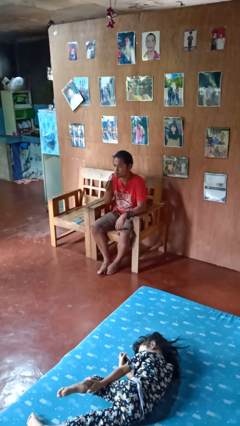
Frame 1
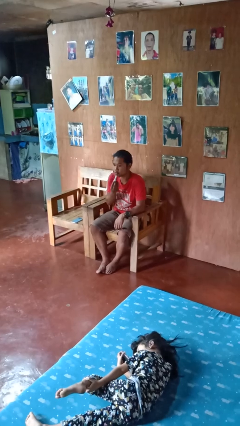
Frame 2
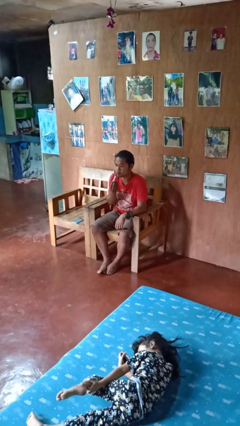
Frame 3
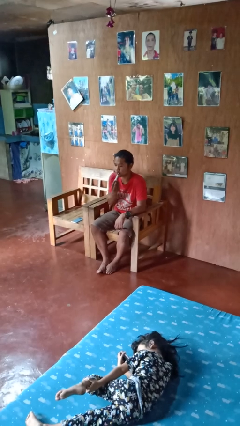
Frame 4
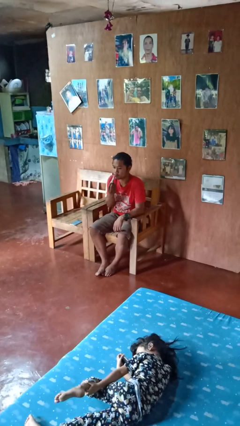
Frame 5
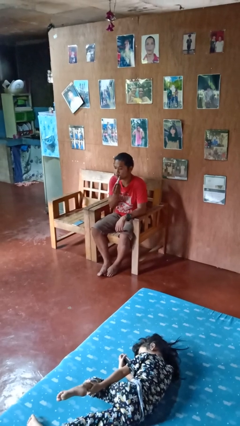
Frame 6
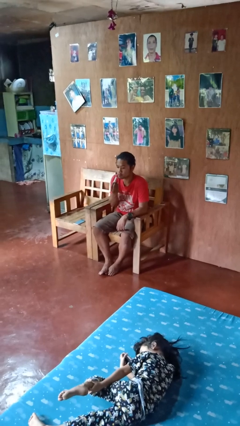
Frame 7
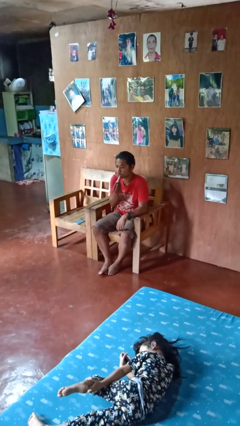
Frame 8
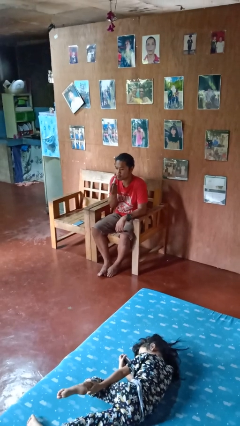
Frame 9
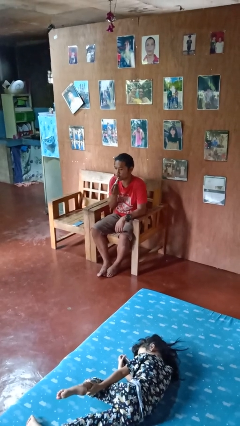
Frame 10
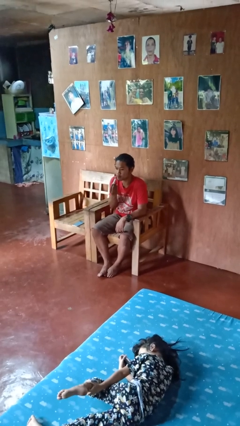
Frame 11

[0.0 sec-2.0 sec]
person applies lip makeup

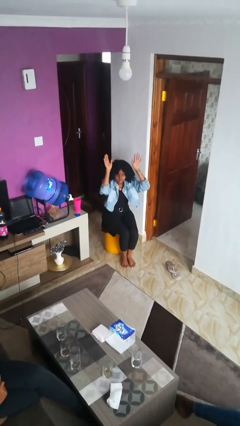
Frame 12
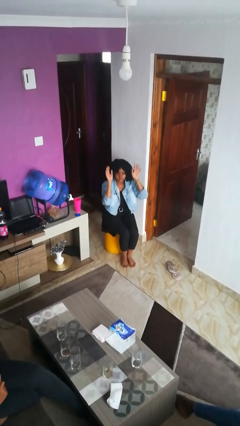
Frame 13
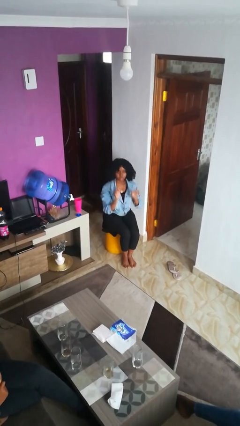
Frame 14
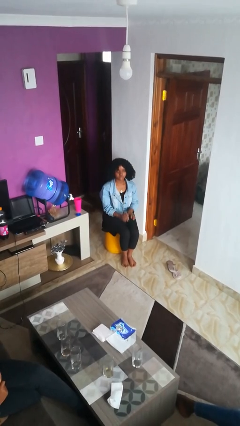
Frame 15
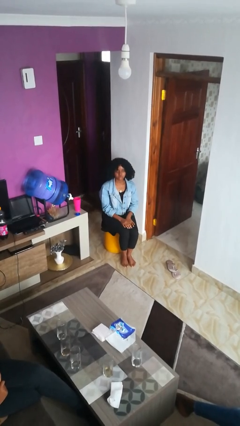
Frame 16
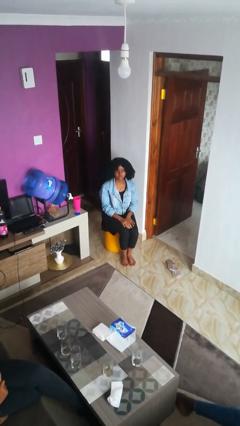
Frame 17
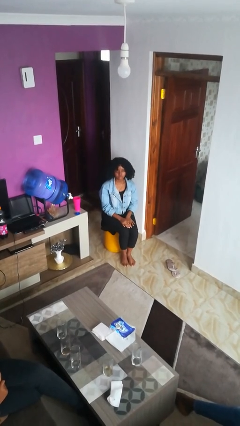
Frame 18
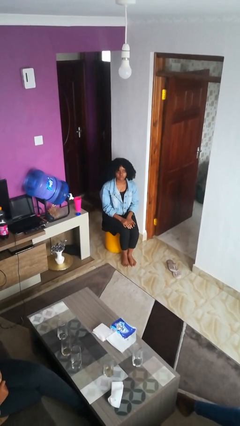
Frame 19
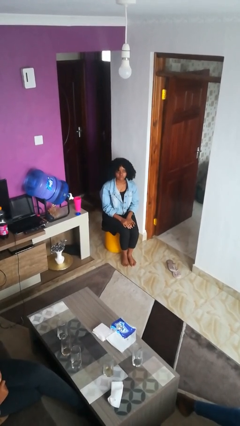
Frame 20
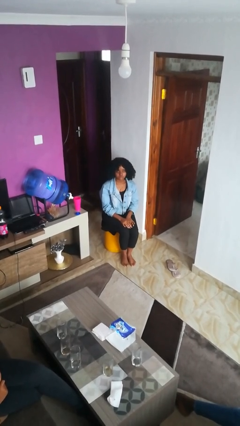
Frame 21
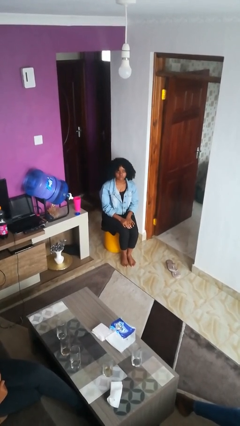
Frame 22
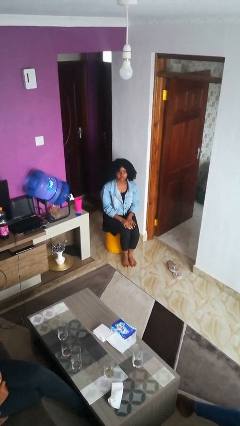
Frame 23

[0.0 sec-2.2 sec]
person gestures lower hand

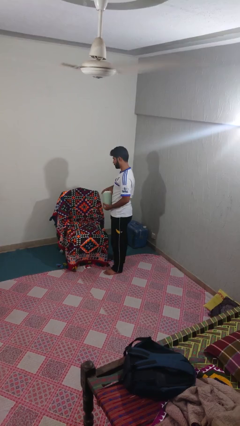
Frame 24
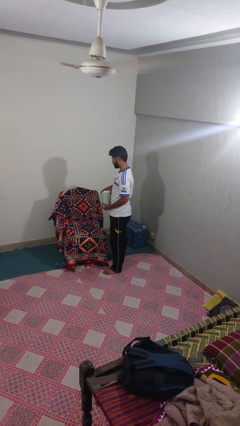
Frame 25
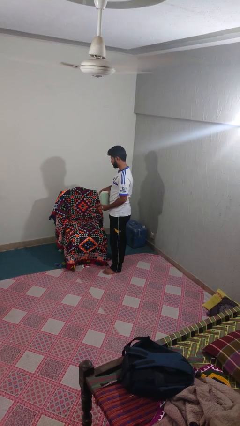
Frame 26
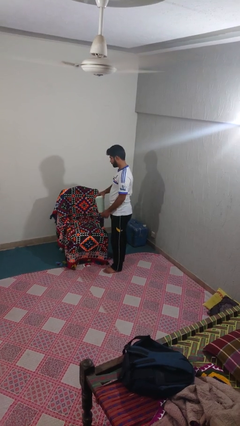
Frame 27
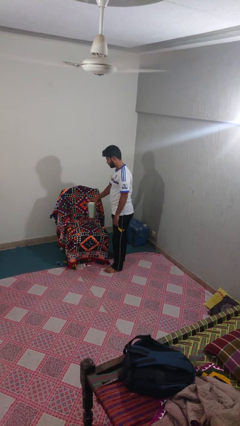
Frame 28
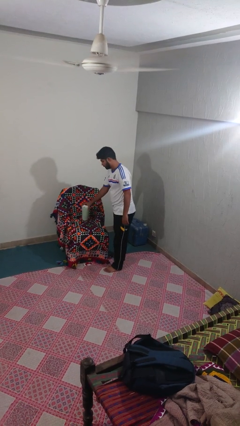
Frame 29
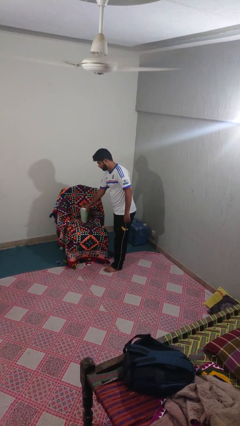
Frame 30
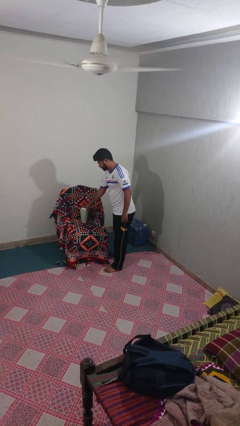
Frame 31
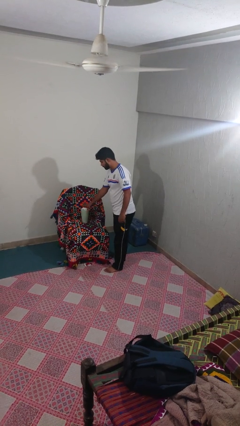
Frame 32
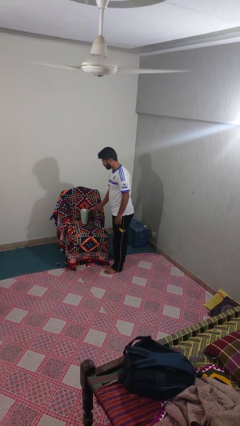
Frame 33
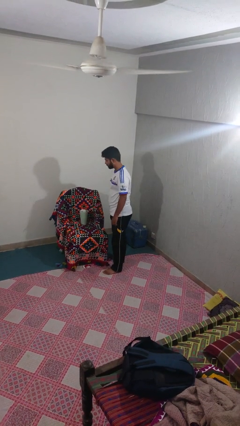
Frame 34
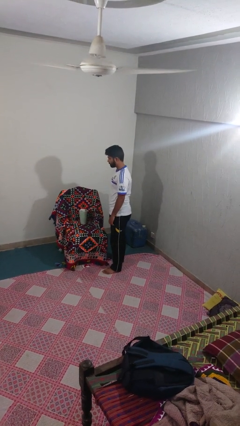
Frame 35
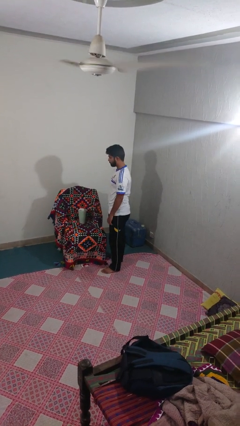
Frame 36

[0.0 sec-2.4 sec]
person puts down object on couch

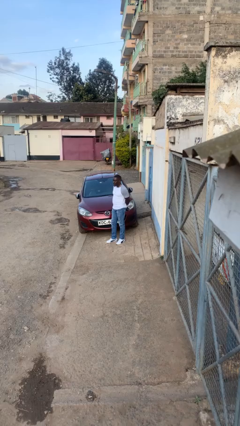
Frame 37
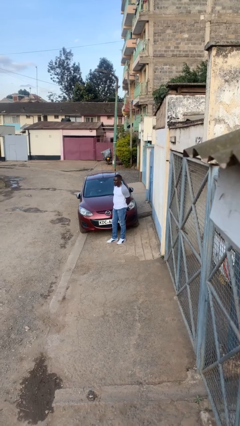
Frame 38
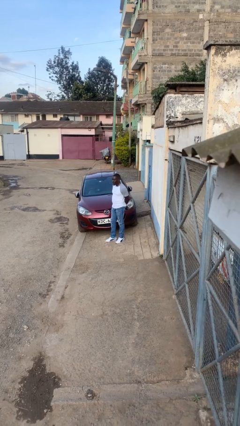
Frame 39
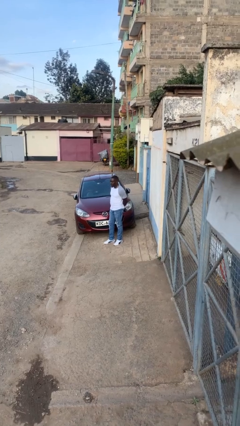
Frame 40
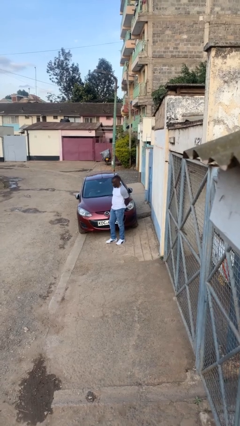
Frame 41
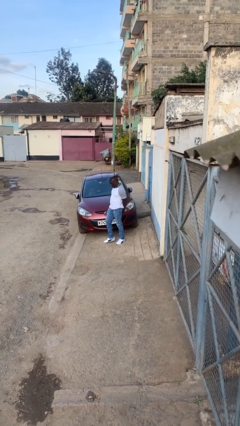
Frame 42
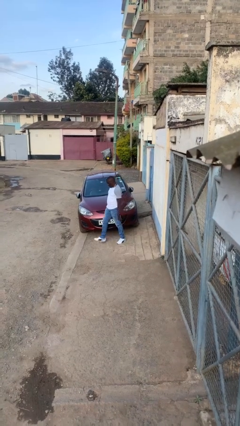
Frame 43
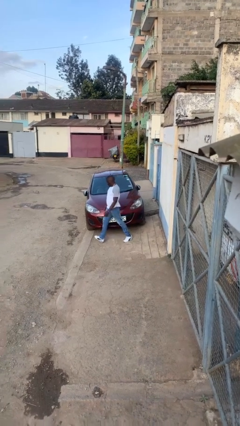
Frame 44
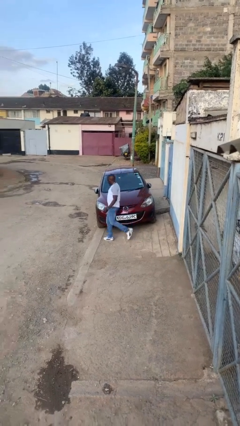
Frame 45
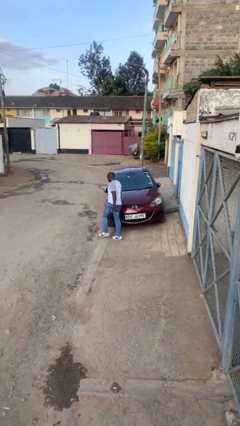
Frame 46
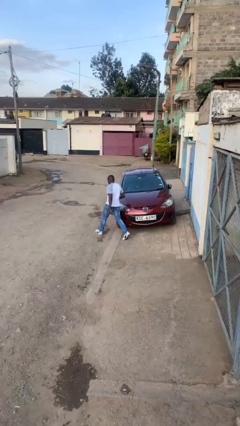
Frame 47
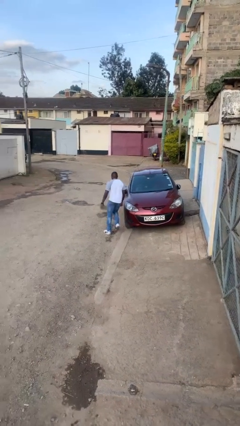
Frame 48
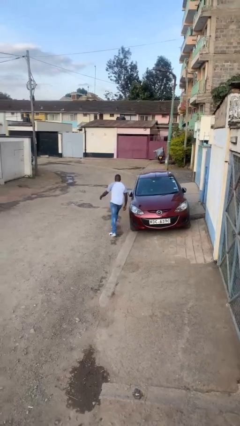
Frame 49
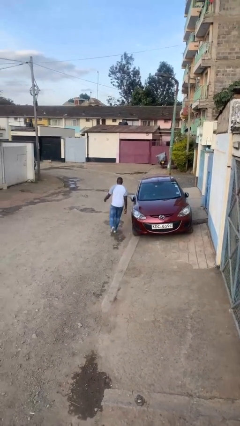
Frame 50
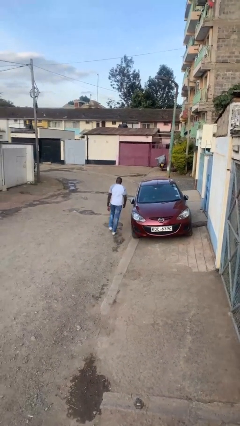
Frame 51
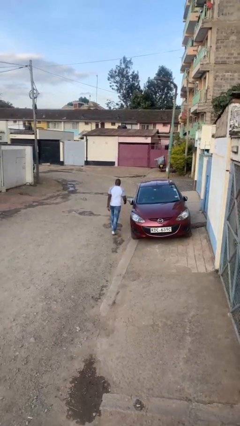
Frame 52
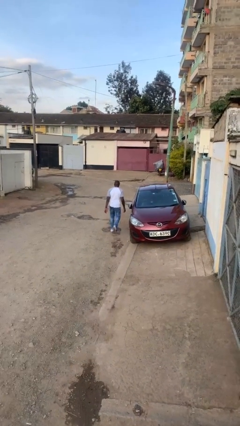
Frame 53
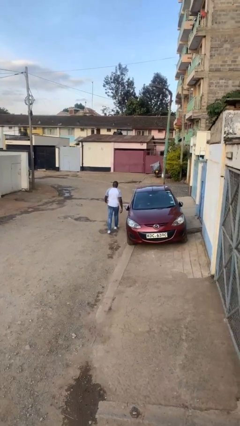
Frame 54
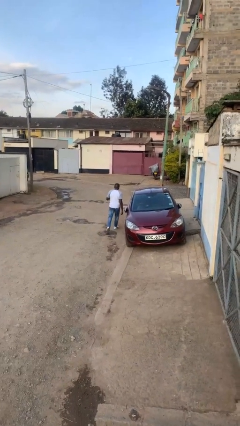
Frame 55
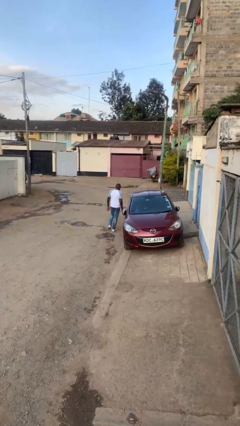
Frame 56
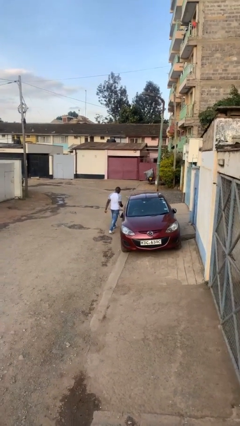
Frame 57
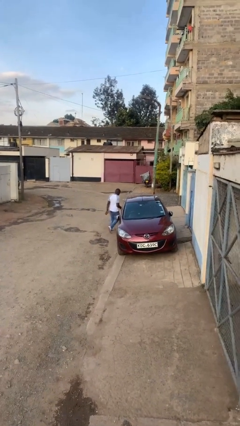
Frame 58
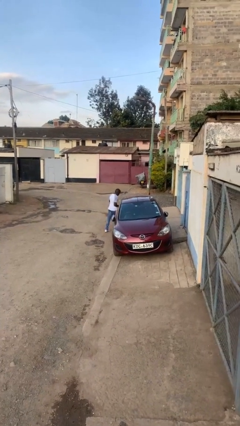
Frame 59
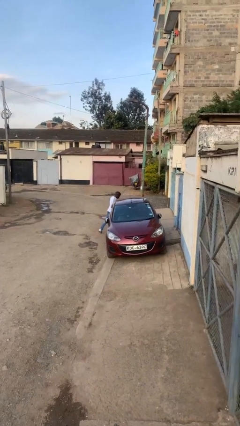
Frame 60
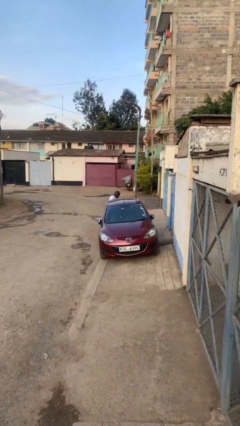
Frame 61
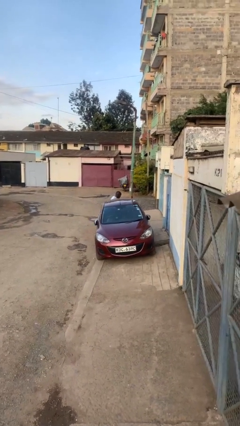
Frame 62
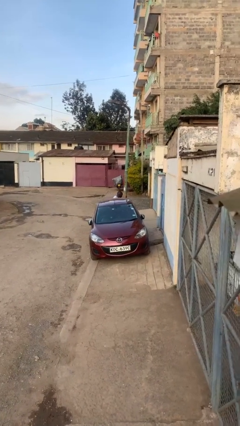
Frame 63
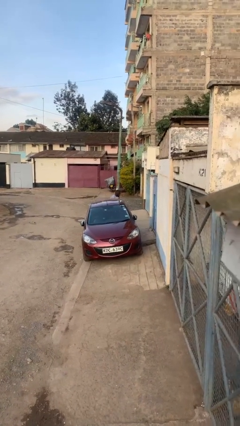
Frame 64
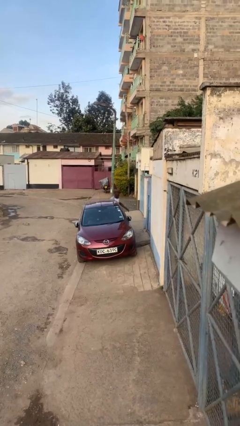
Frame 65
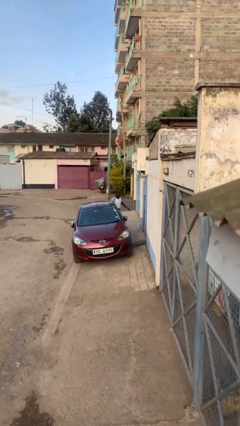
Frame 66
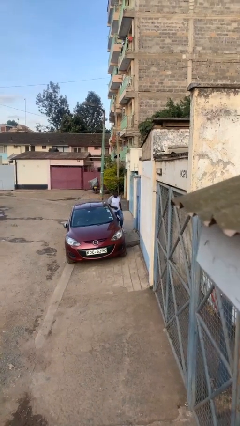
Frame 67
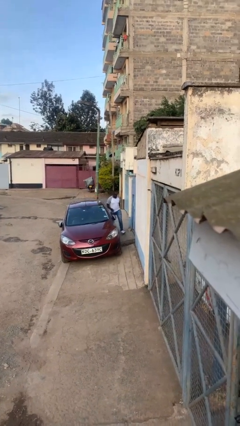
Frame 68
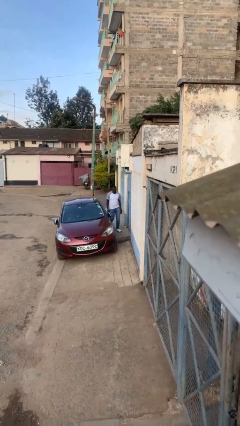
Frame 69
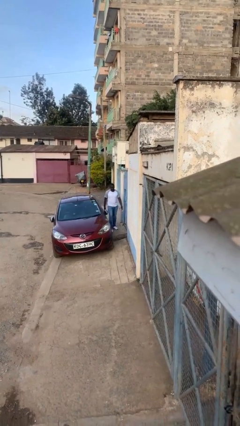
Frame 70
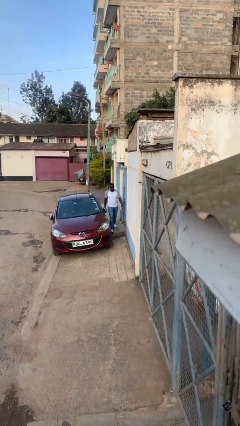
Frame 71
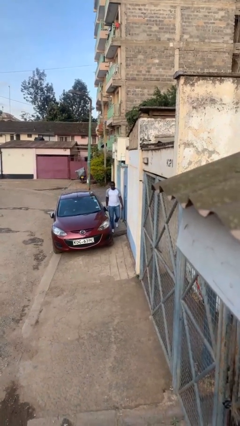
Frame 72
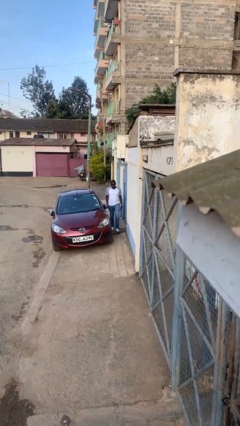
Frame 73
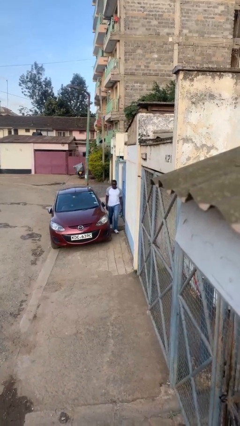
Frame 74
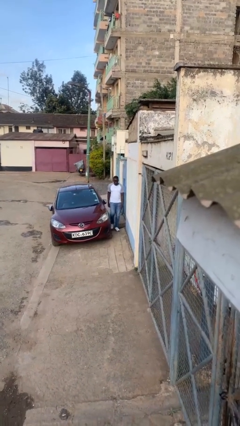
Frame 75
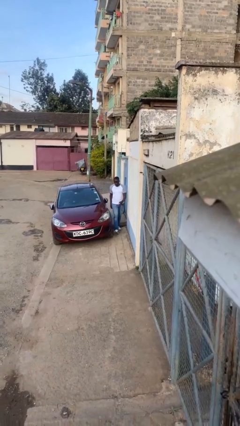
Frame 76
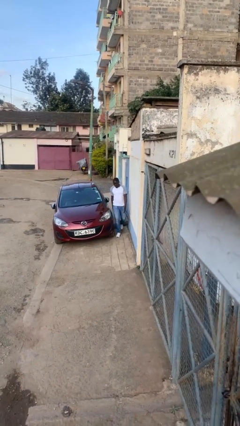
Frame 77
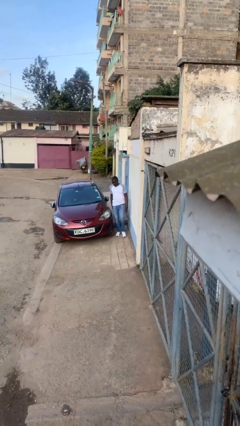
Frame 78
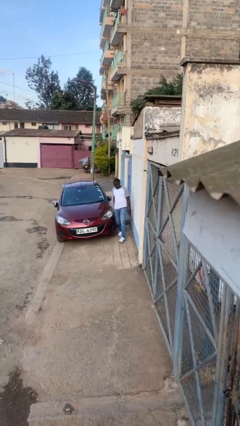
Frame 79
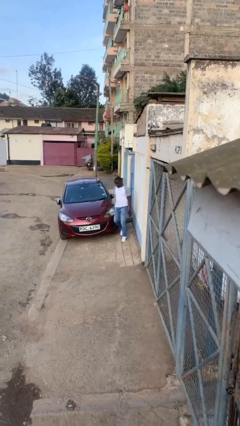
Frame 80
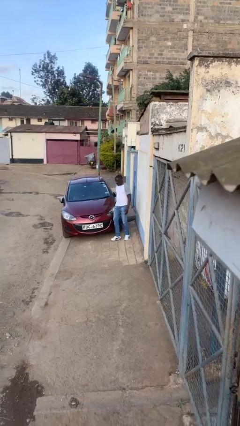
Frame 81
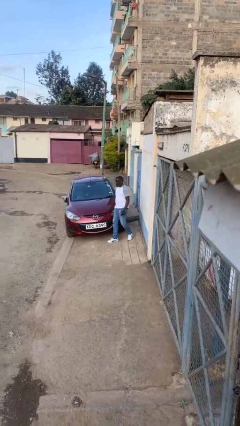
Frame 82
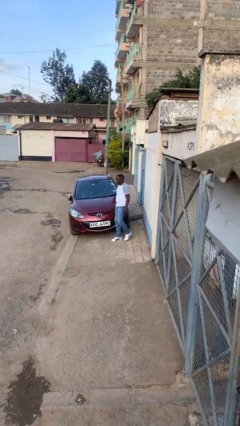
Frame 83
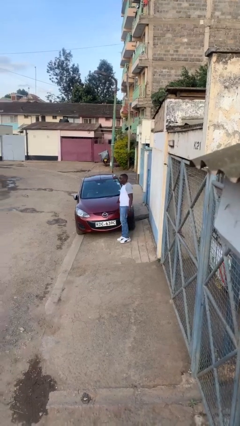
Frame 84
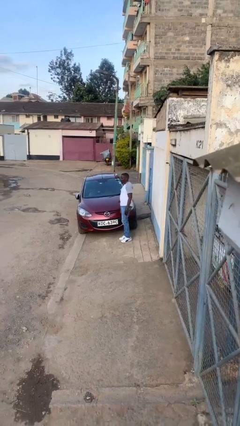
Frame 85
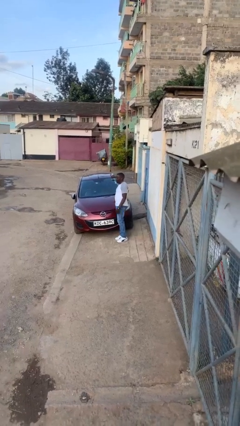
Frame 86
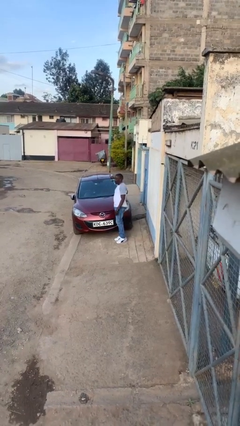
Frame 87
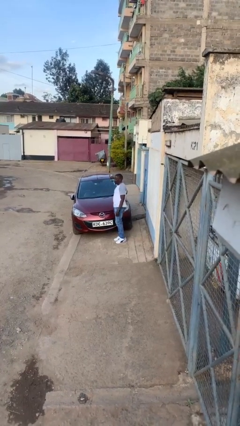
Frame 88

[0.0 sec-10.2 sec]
person walks around car

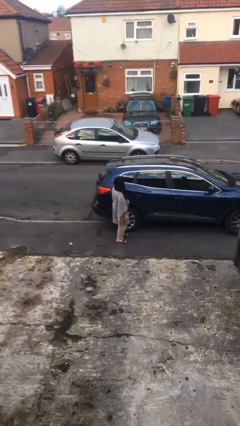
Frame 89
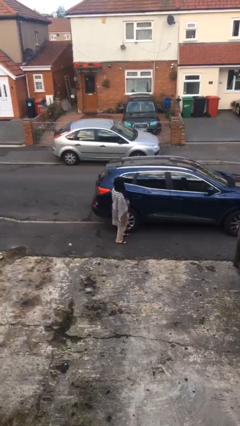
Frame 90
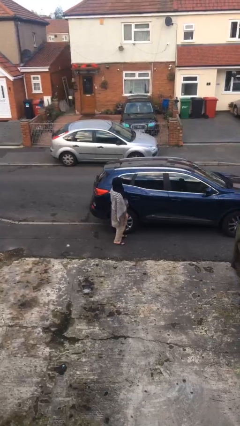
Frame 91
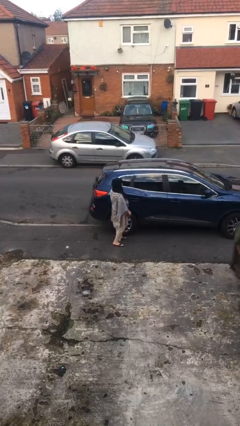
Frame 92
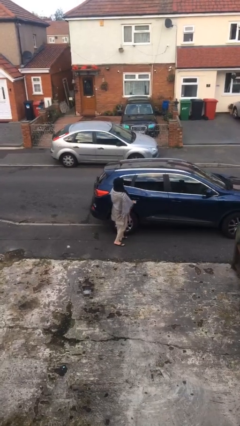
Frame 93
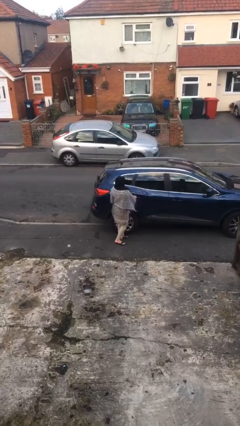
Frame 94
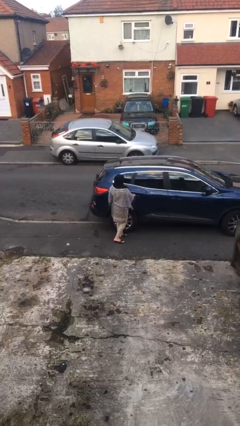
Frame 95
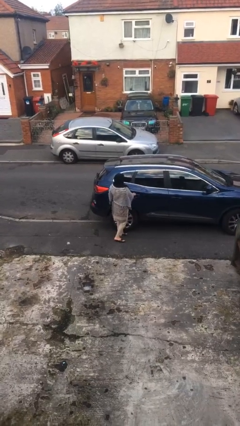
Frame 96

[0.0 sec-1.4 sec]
person opens car door
